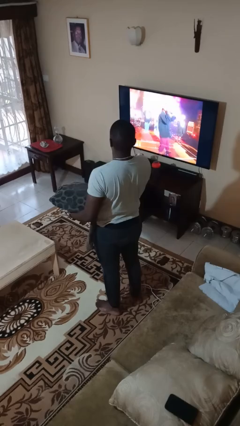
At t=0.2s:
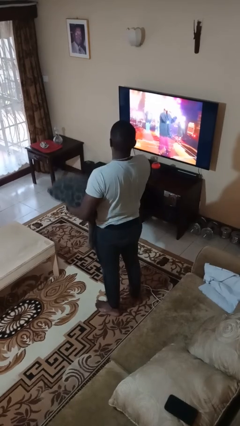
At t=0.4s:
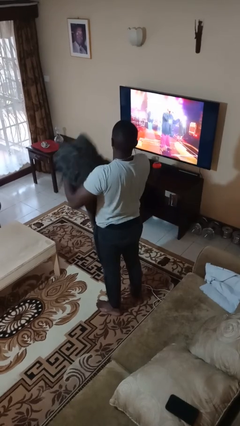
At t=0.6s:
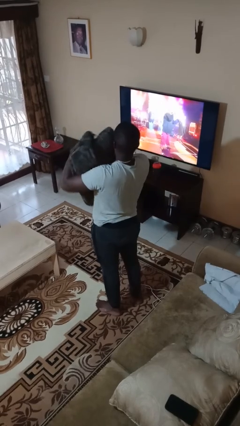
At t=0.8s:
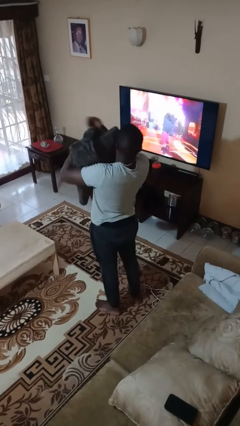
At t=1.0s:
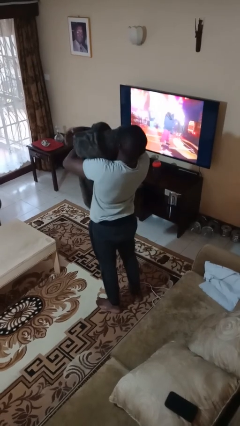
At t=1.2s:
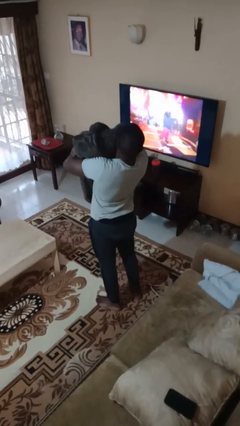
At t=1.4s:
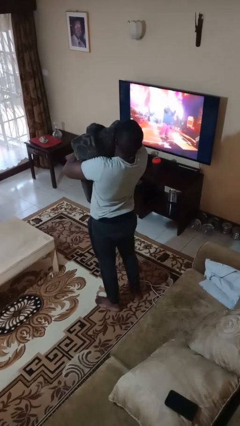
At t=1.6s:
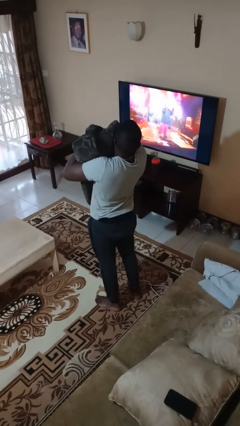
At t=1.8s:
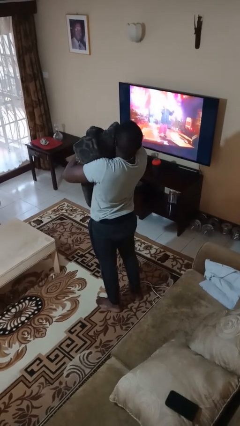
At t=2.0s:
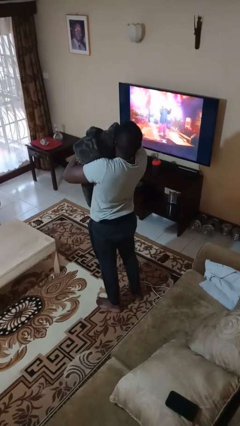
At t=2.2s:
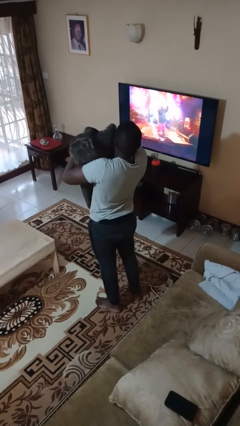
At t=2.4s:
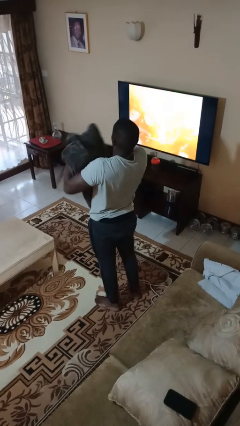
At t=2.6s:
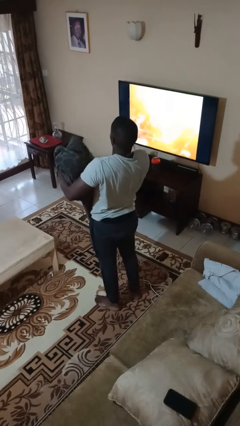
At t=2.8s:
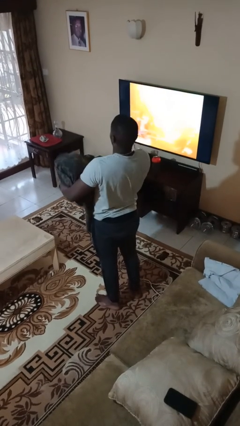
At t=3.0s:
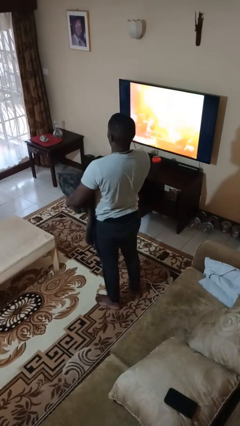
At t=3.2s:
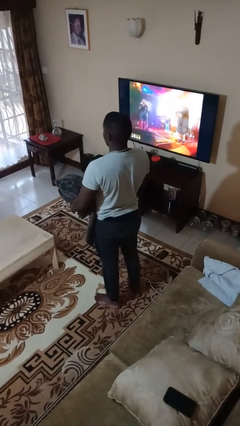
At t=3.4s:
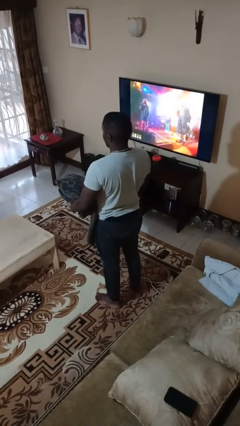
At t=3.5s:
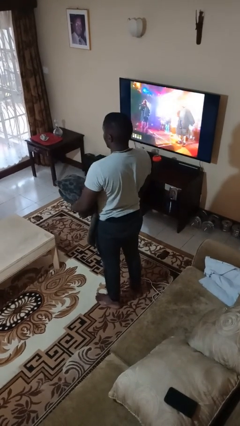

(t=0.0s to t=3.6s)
person hugs stuffed animal

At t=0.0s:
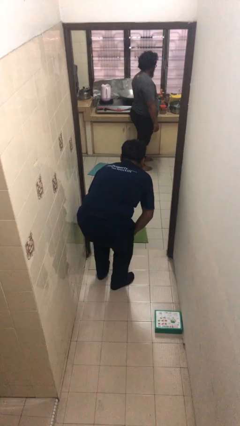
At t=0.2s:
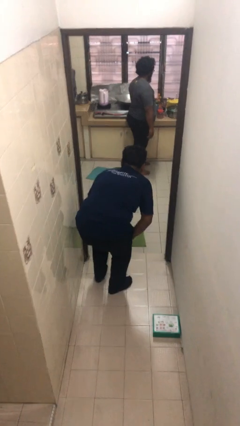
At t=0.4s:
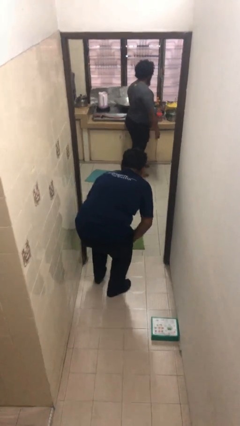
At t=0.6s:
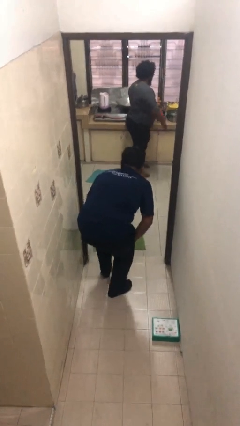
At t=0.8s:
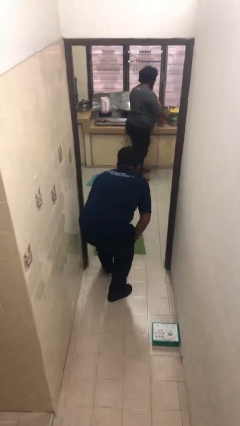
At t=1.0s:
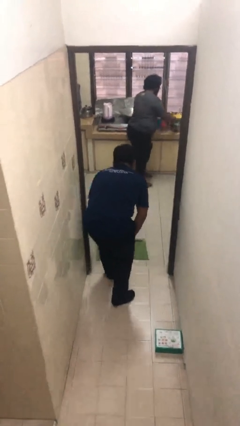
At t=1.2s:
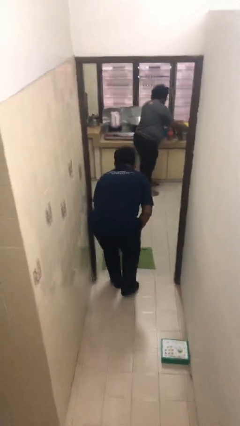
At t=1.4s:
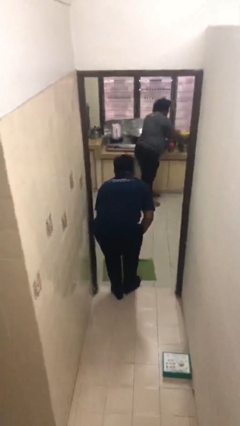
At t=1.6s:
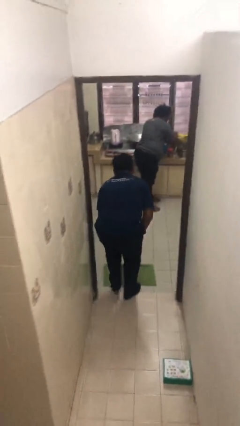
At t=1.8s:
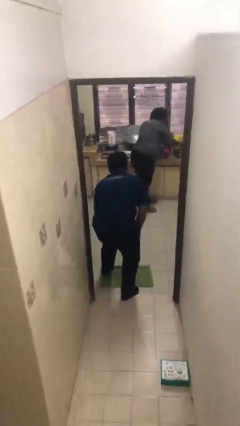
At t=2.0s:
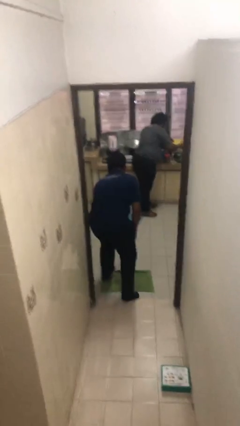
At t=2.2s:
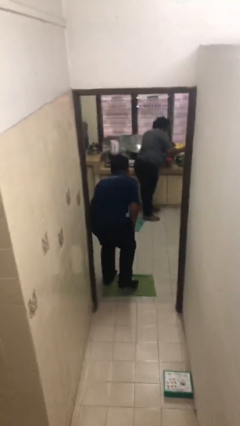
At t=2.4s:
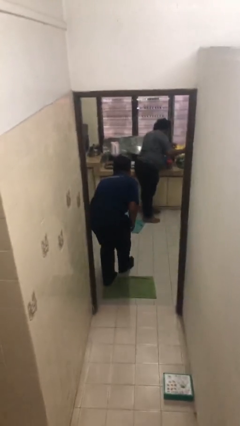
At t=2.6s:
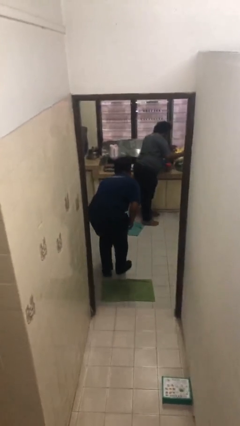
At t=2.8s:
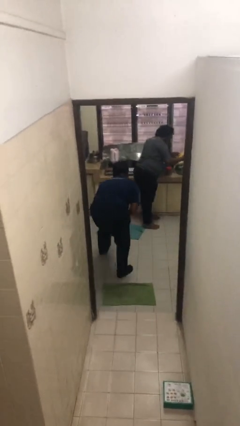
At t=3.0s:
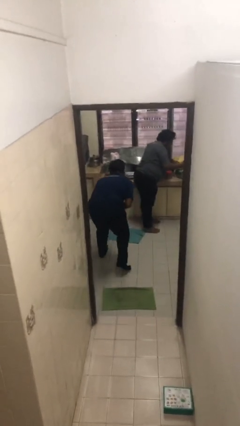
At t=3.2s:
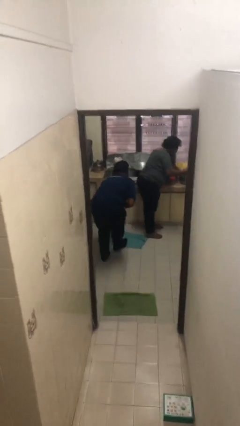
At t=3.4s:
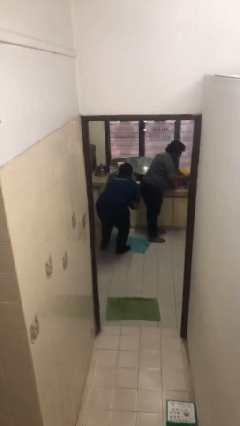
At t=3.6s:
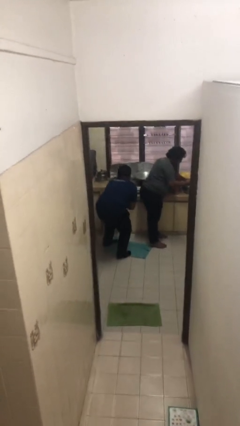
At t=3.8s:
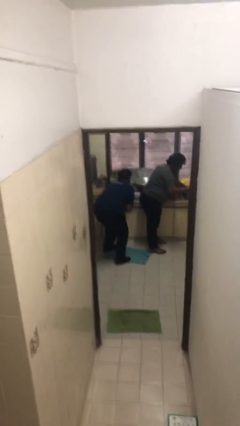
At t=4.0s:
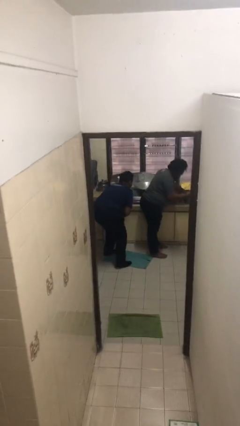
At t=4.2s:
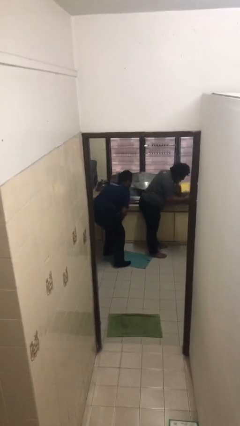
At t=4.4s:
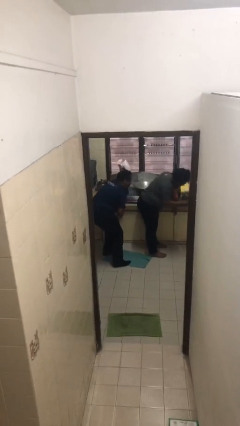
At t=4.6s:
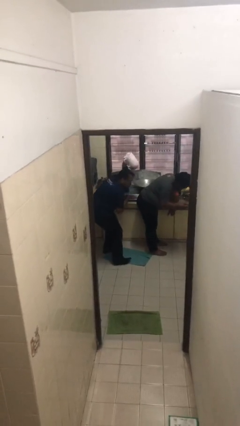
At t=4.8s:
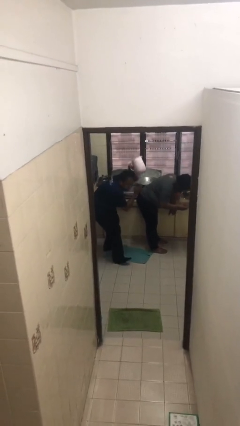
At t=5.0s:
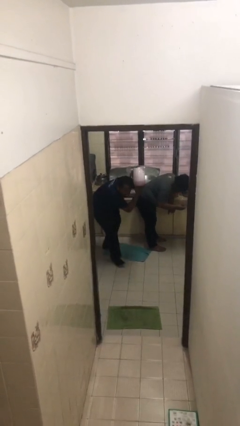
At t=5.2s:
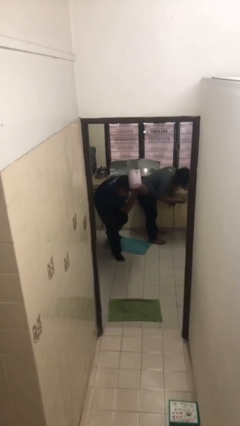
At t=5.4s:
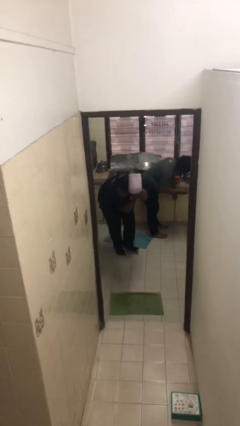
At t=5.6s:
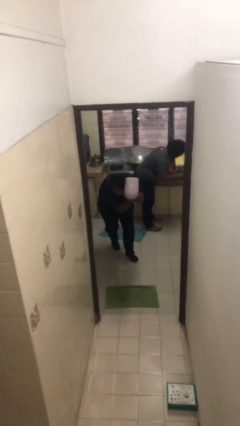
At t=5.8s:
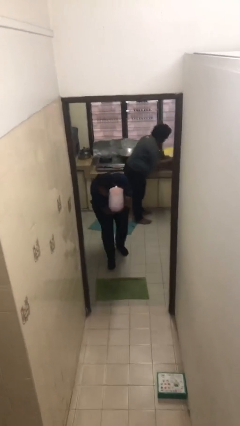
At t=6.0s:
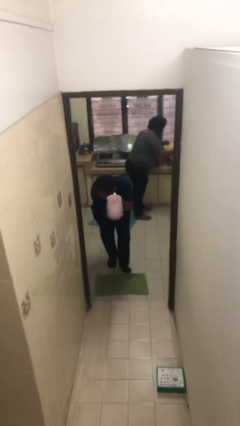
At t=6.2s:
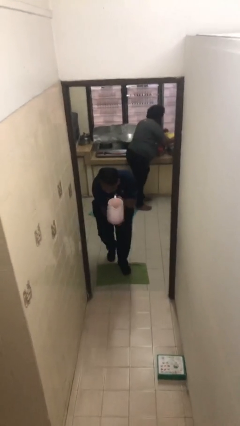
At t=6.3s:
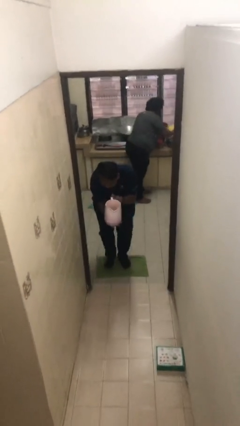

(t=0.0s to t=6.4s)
person steals object from person

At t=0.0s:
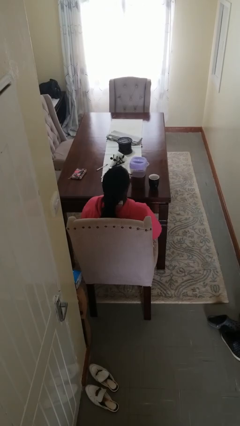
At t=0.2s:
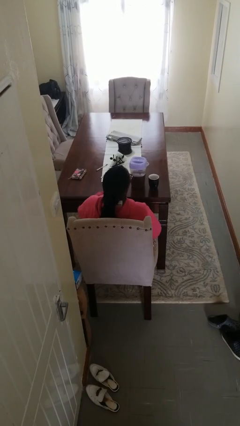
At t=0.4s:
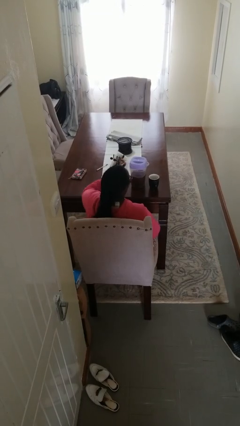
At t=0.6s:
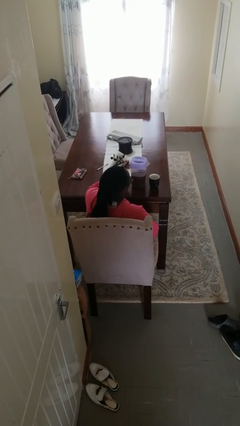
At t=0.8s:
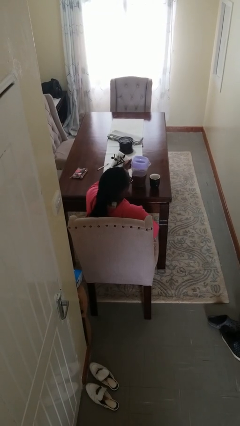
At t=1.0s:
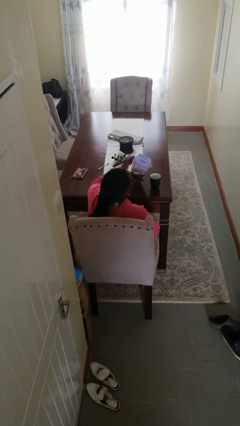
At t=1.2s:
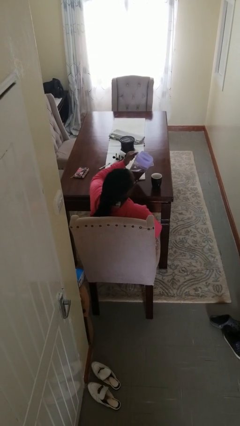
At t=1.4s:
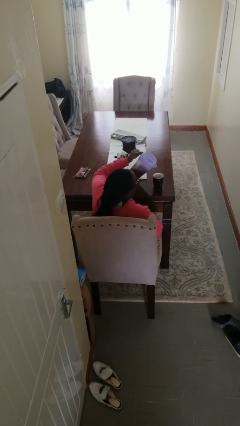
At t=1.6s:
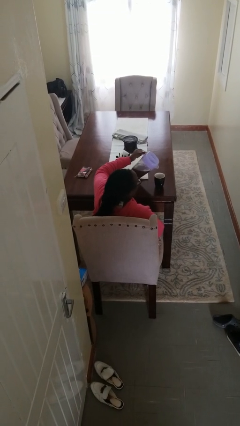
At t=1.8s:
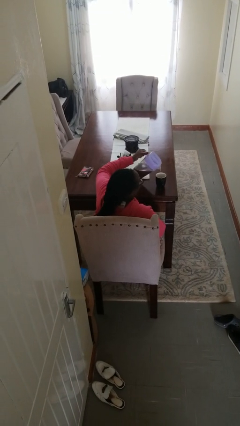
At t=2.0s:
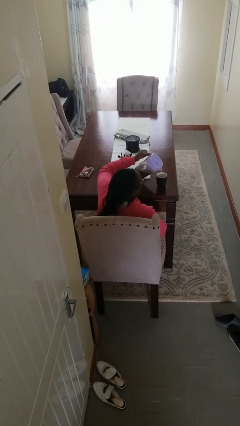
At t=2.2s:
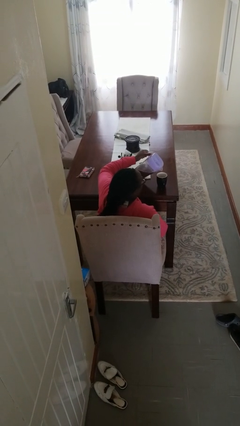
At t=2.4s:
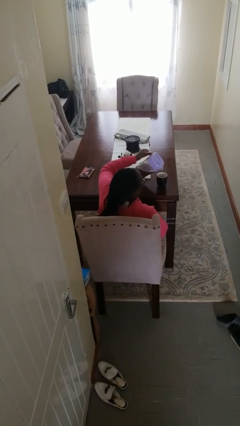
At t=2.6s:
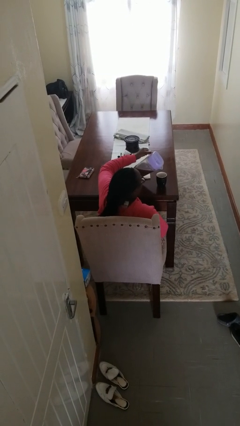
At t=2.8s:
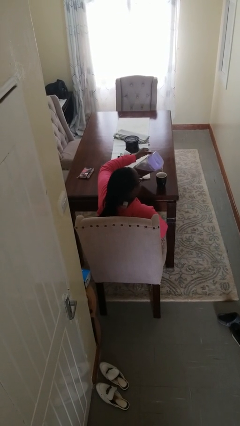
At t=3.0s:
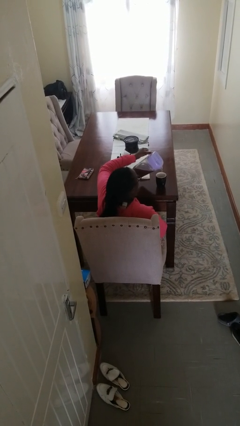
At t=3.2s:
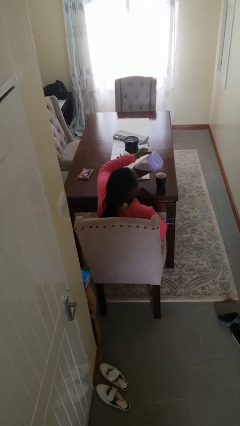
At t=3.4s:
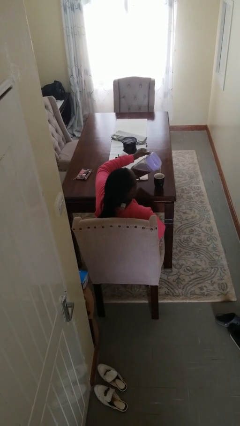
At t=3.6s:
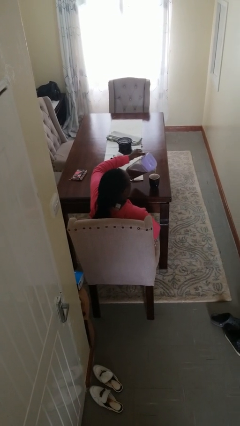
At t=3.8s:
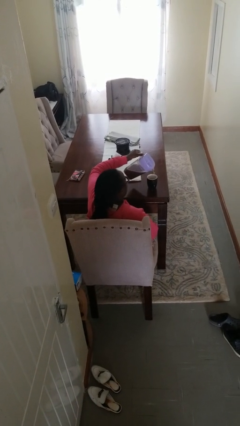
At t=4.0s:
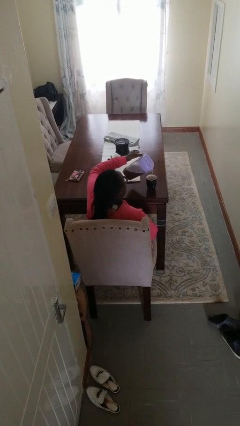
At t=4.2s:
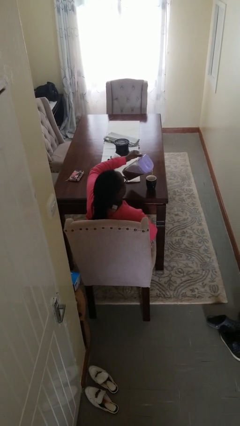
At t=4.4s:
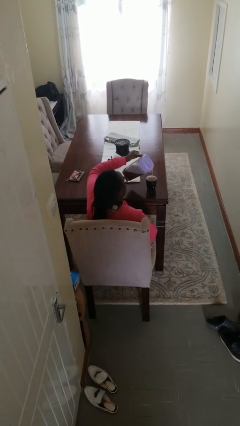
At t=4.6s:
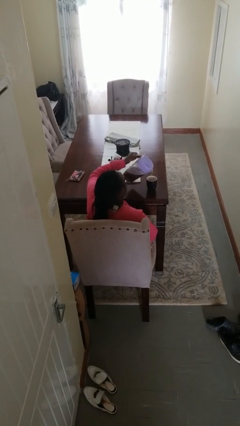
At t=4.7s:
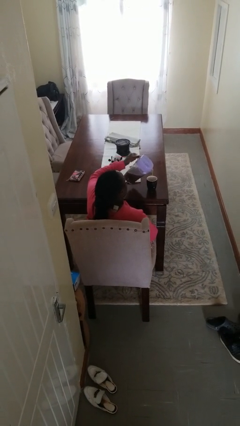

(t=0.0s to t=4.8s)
person pours coffee into mug

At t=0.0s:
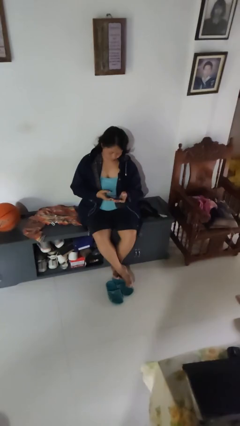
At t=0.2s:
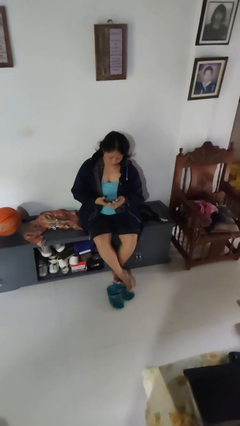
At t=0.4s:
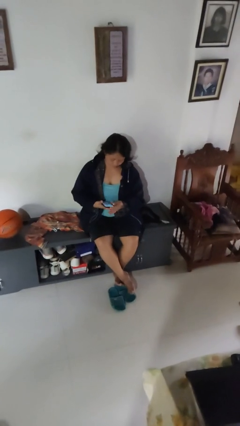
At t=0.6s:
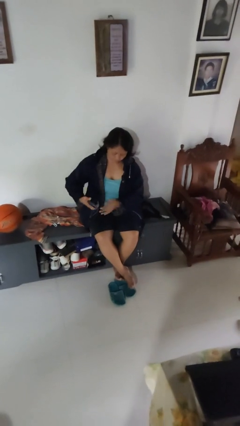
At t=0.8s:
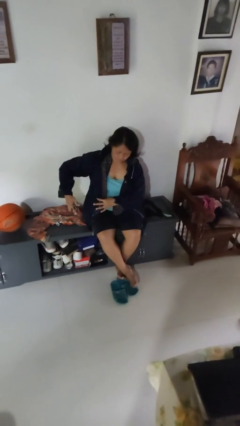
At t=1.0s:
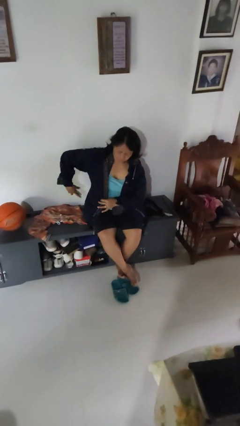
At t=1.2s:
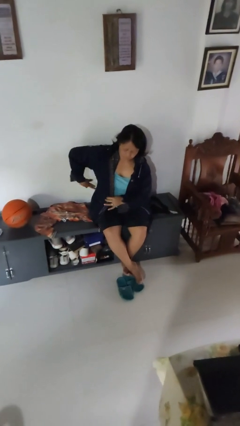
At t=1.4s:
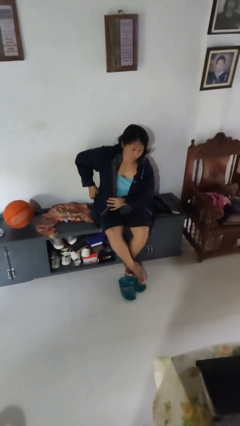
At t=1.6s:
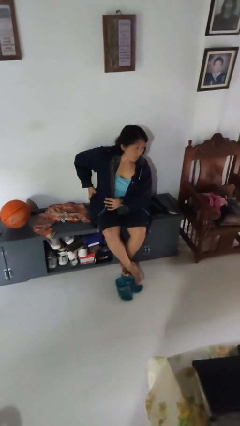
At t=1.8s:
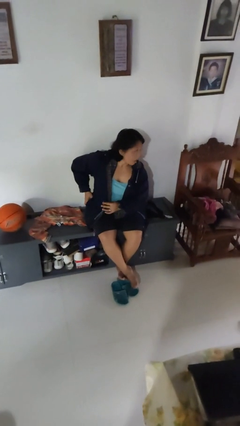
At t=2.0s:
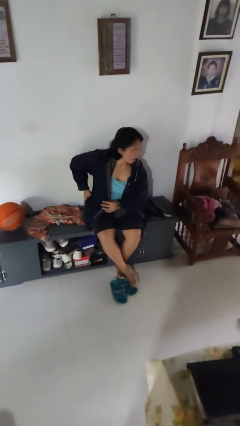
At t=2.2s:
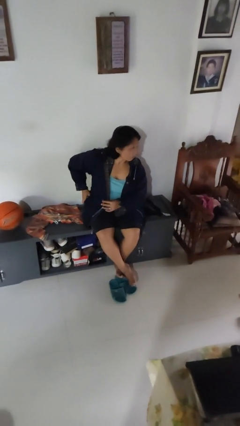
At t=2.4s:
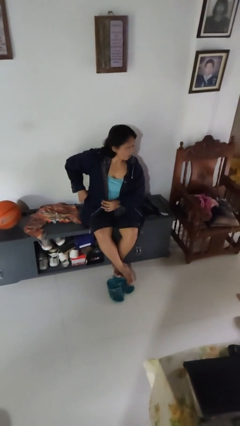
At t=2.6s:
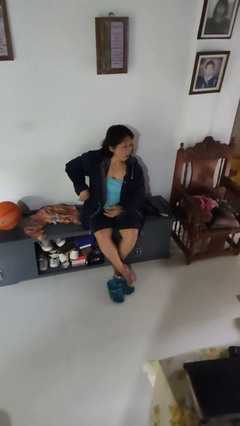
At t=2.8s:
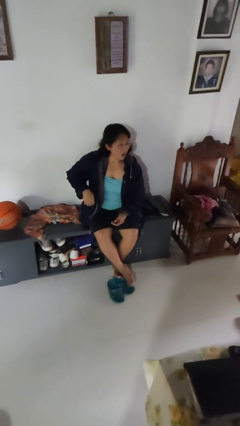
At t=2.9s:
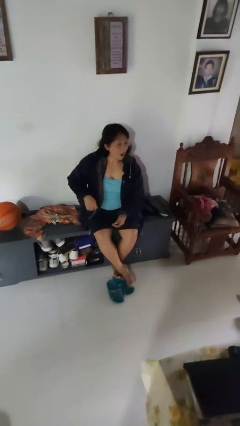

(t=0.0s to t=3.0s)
person puts phone into pocket
